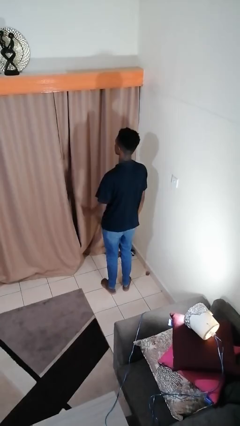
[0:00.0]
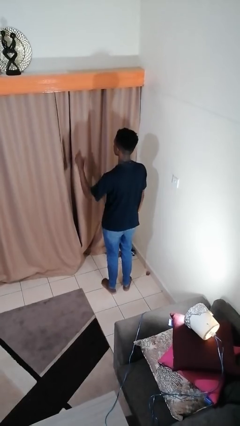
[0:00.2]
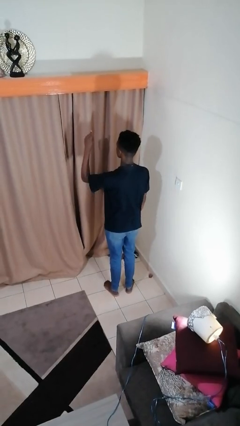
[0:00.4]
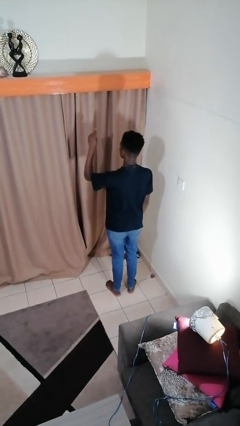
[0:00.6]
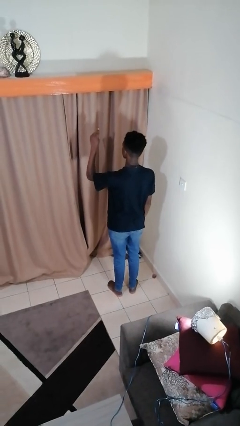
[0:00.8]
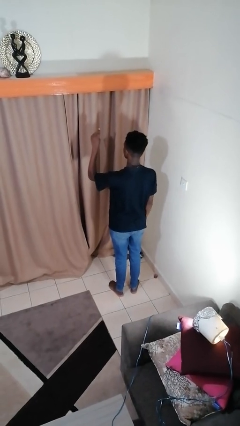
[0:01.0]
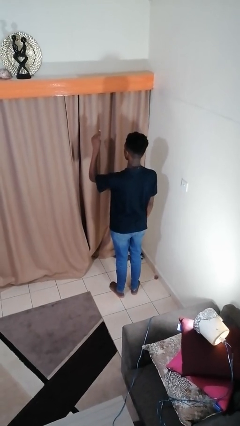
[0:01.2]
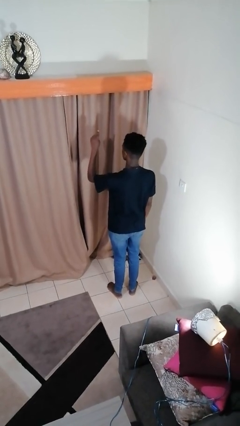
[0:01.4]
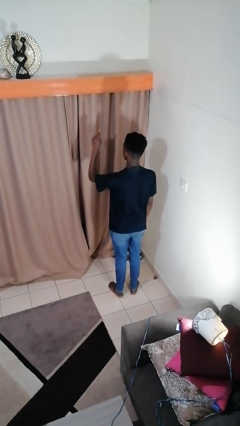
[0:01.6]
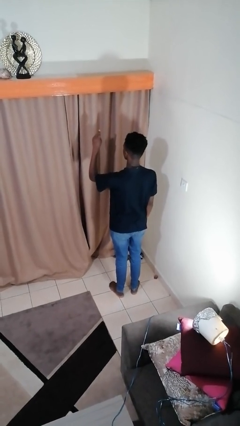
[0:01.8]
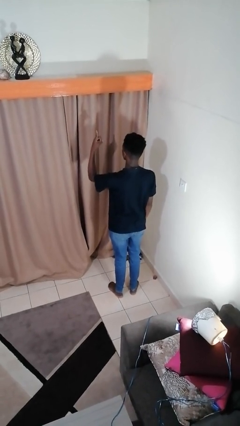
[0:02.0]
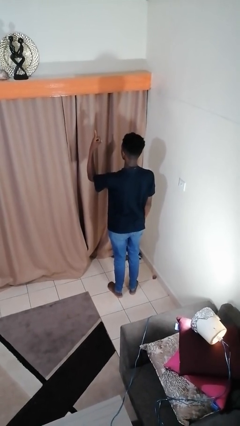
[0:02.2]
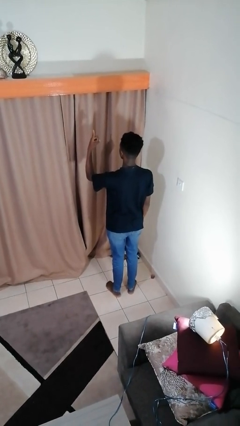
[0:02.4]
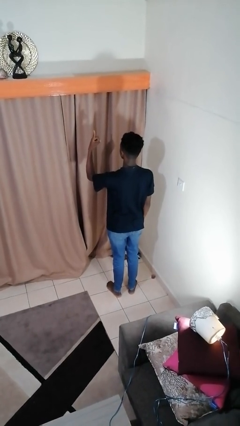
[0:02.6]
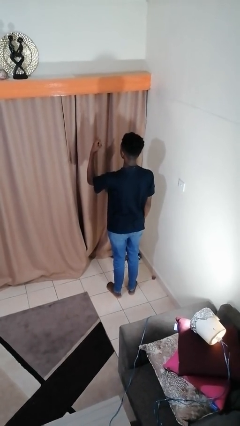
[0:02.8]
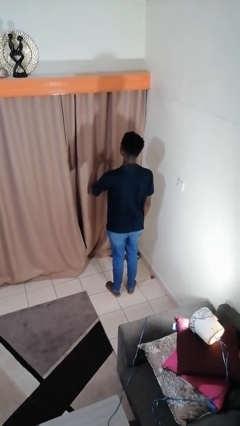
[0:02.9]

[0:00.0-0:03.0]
person gestures number one

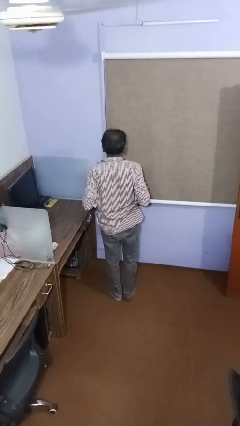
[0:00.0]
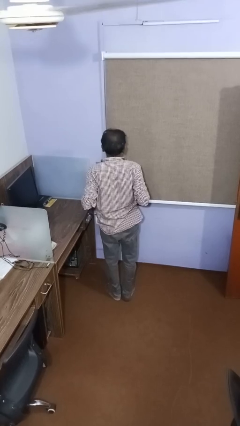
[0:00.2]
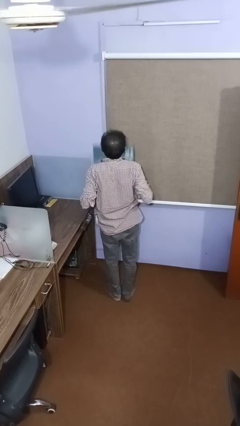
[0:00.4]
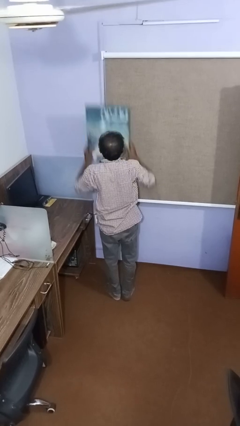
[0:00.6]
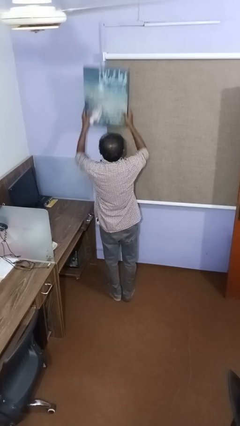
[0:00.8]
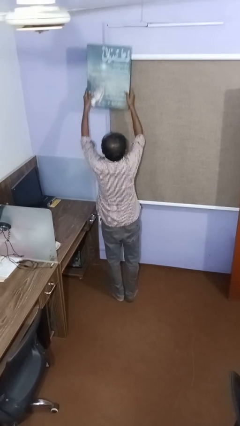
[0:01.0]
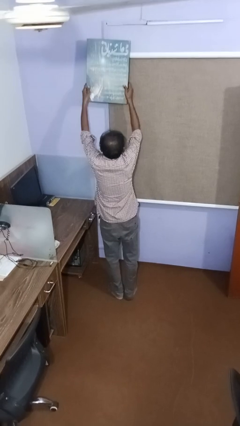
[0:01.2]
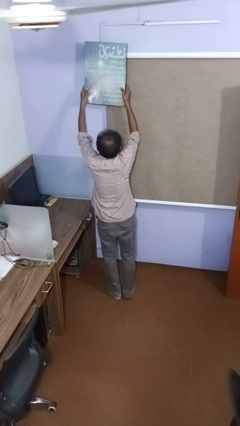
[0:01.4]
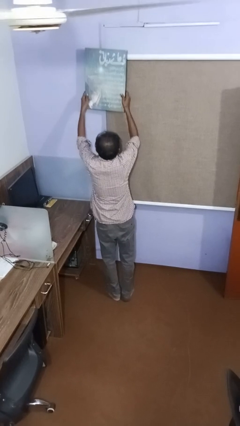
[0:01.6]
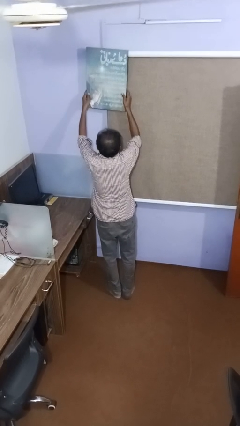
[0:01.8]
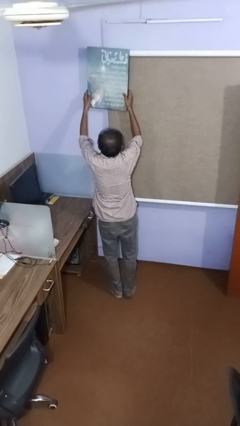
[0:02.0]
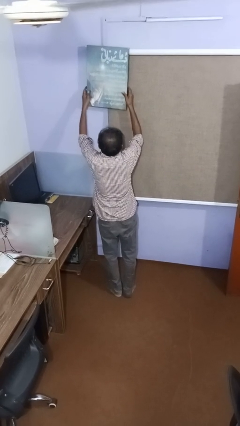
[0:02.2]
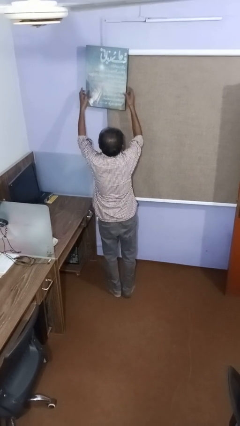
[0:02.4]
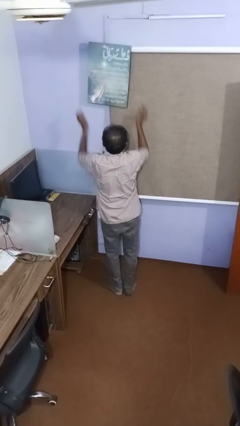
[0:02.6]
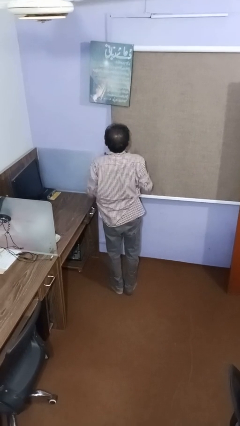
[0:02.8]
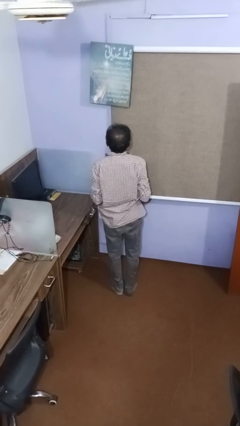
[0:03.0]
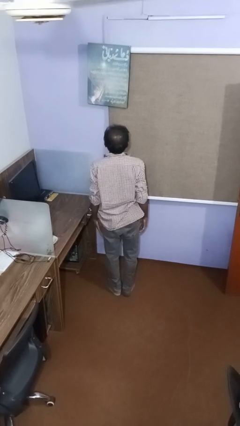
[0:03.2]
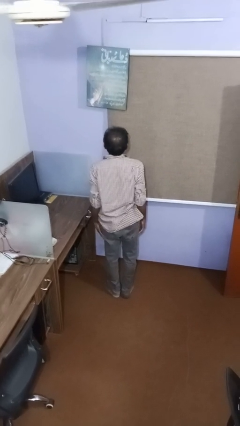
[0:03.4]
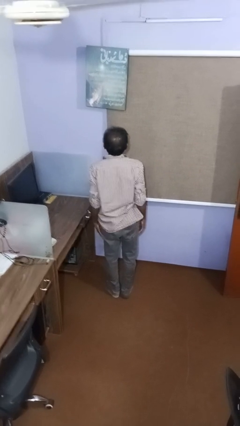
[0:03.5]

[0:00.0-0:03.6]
person puts up picture frame

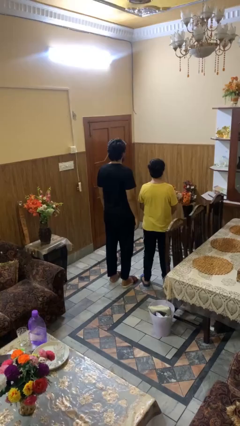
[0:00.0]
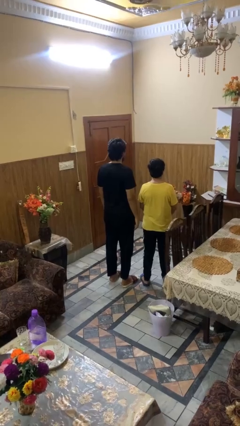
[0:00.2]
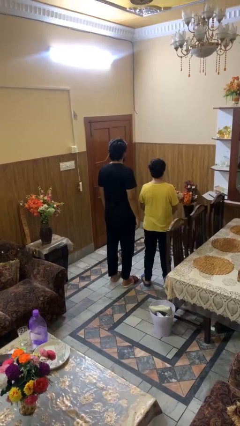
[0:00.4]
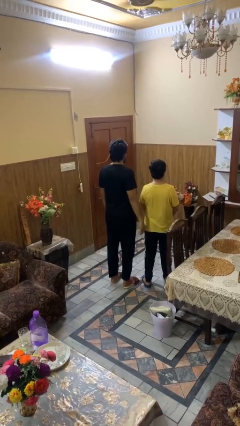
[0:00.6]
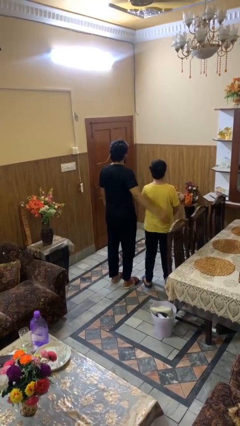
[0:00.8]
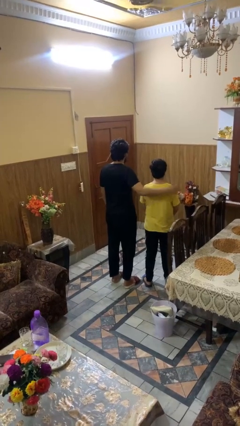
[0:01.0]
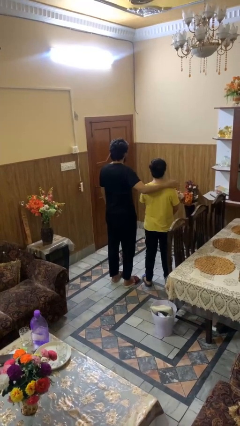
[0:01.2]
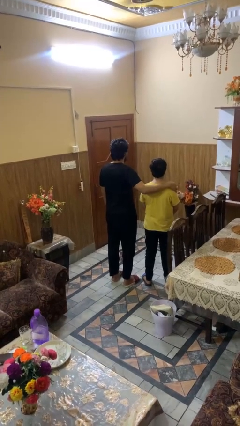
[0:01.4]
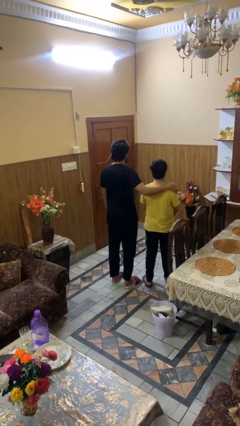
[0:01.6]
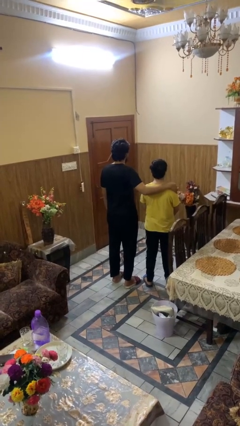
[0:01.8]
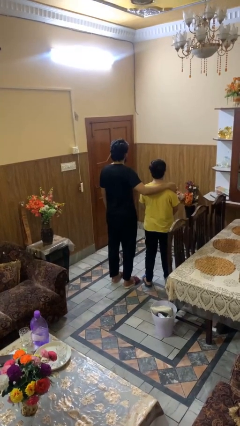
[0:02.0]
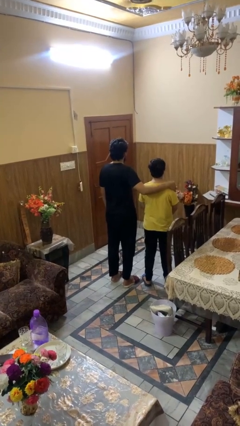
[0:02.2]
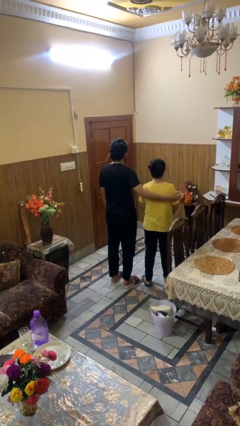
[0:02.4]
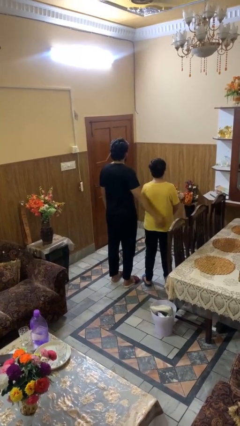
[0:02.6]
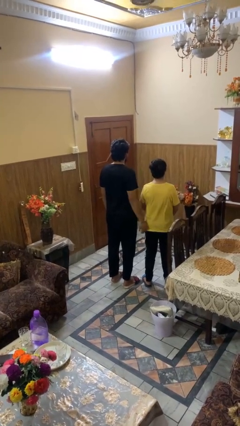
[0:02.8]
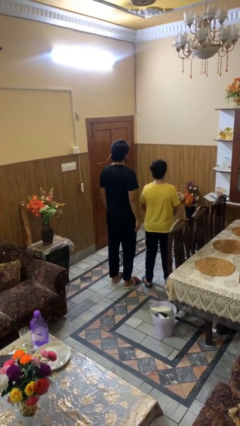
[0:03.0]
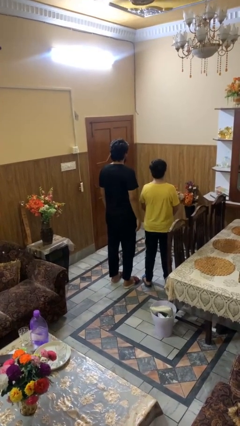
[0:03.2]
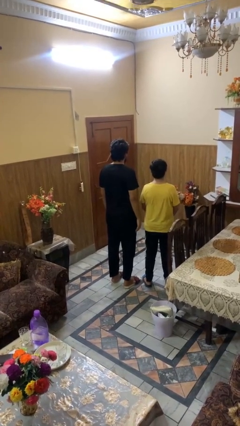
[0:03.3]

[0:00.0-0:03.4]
person pounds shoulders of person

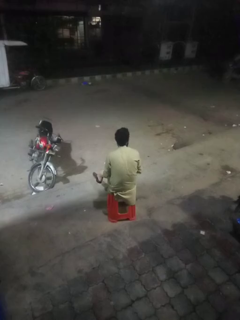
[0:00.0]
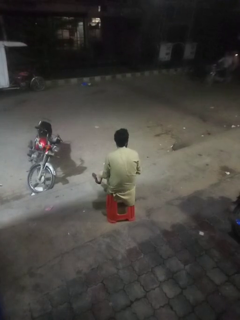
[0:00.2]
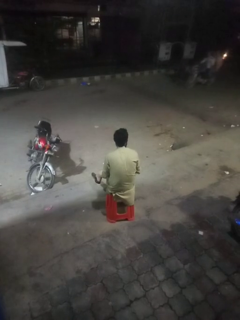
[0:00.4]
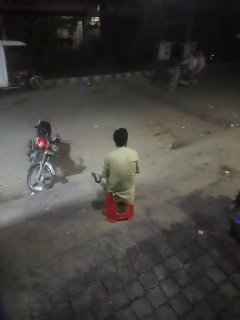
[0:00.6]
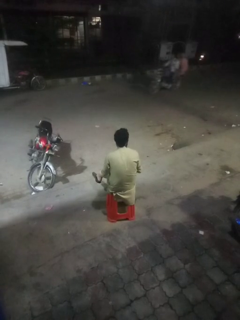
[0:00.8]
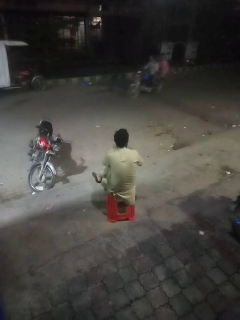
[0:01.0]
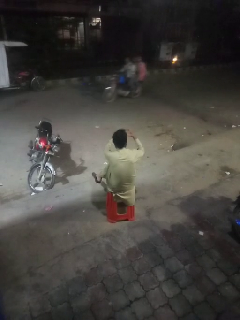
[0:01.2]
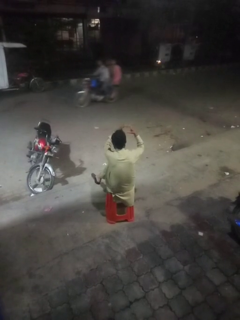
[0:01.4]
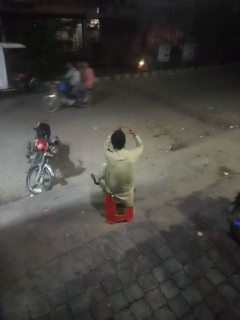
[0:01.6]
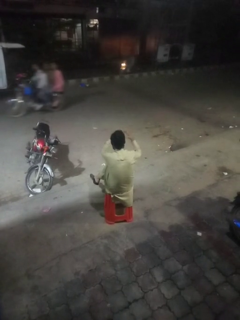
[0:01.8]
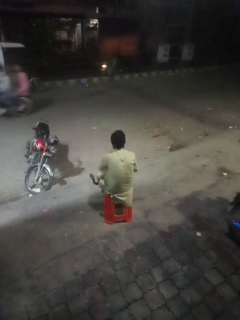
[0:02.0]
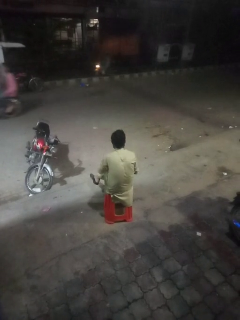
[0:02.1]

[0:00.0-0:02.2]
person gestures heart

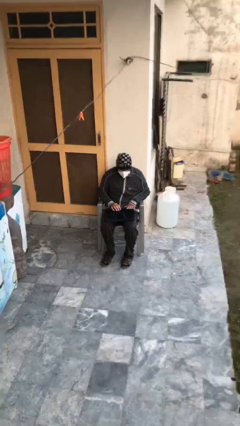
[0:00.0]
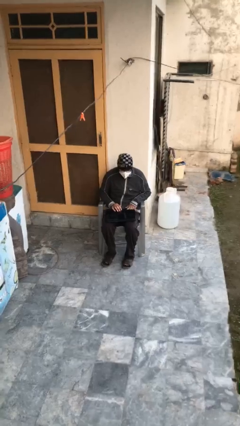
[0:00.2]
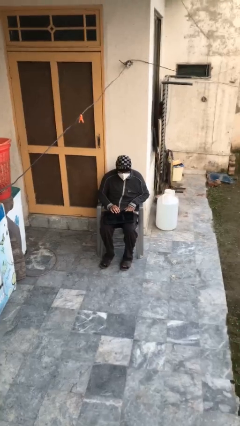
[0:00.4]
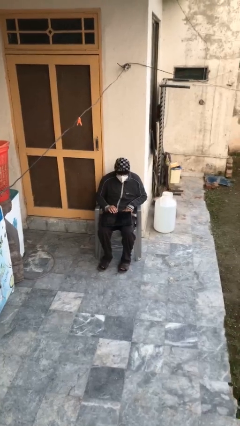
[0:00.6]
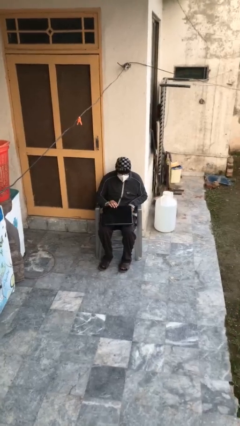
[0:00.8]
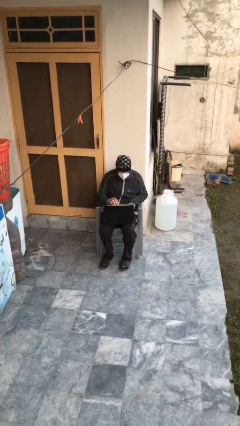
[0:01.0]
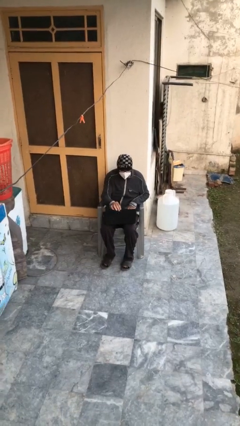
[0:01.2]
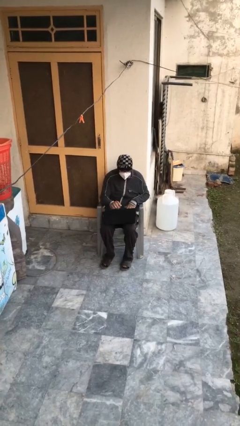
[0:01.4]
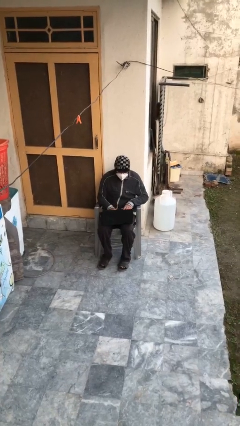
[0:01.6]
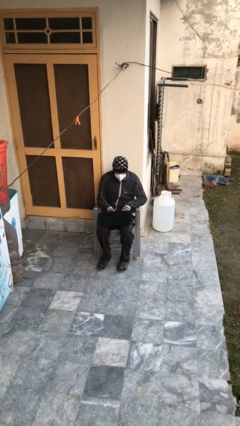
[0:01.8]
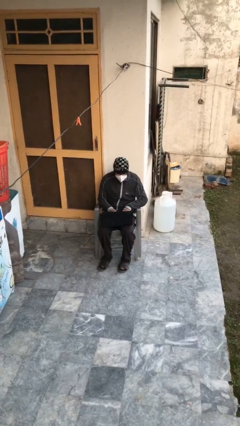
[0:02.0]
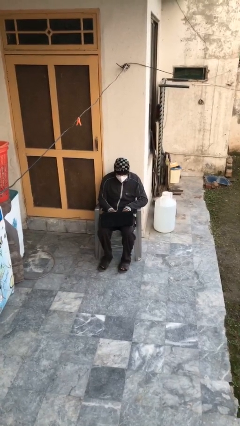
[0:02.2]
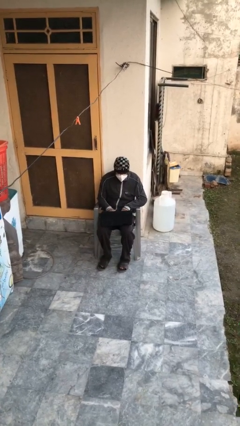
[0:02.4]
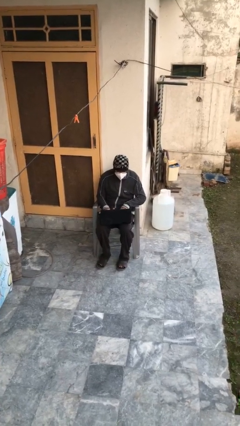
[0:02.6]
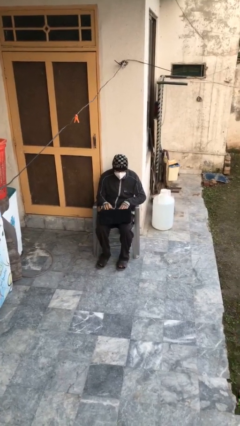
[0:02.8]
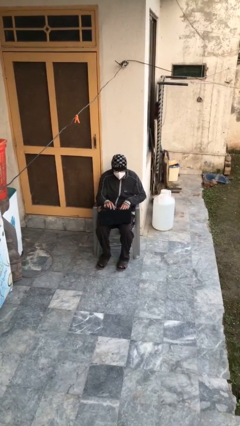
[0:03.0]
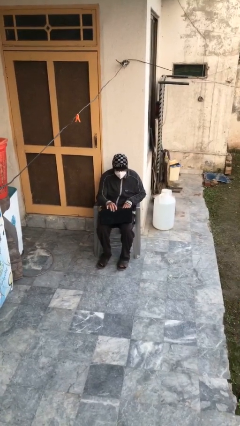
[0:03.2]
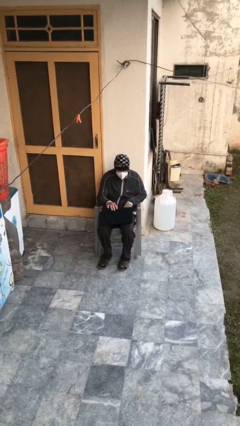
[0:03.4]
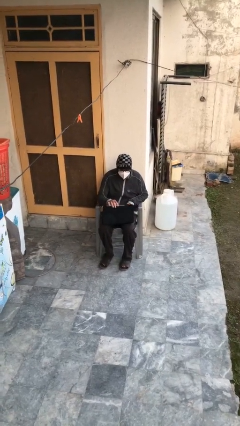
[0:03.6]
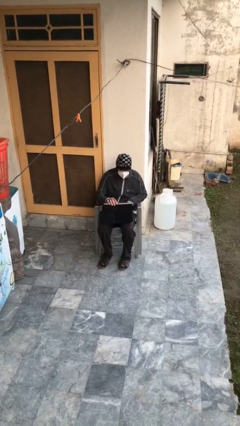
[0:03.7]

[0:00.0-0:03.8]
person interacts with laptop

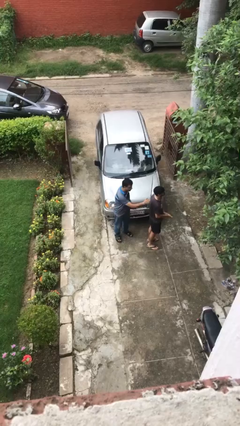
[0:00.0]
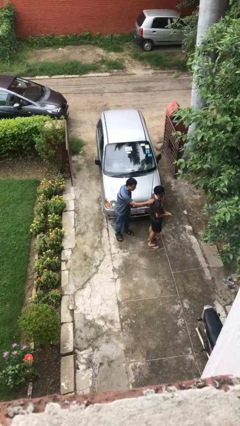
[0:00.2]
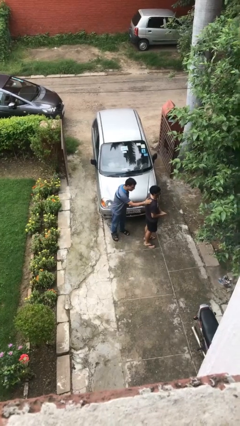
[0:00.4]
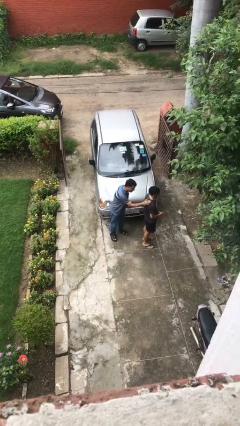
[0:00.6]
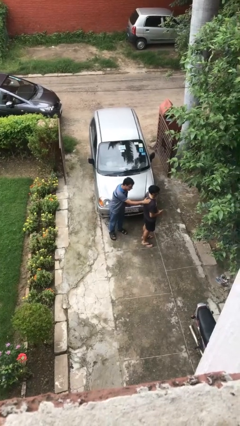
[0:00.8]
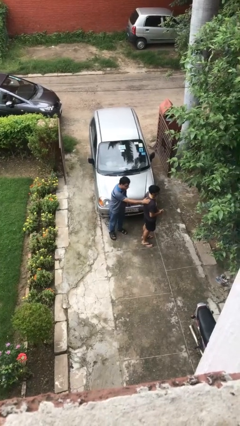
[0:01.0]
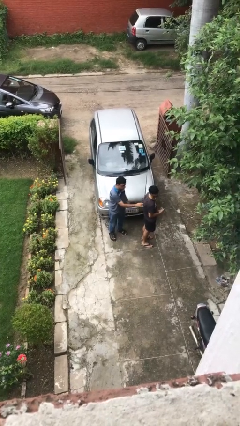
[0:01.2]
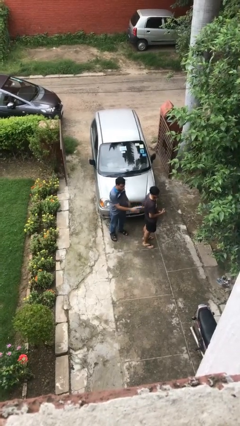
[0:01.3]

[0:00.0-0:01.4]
person touches back of person

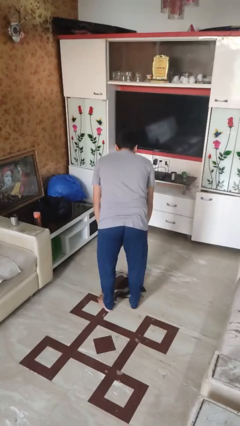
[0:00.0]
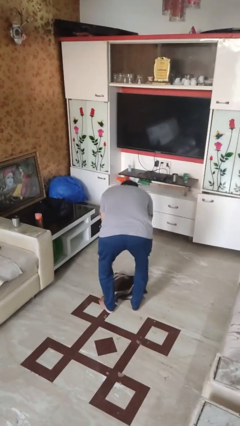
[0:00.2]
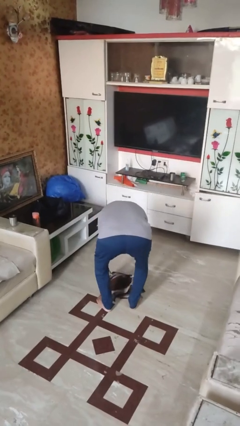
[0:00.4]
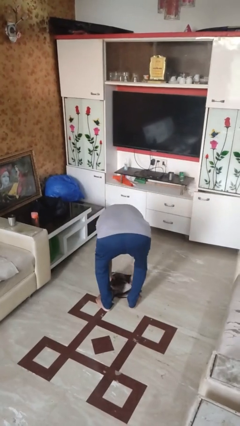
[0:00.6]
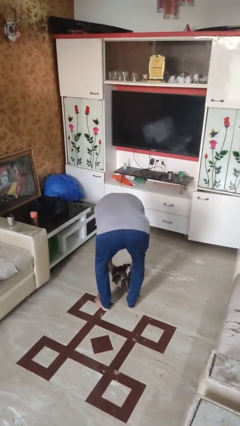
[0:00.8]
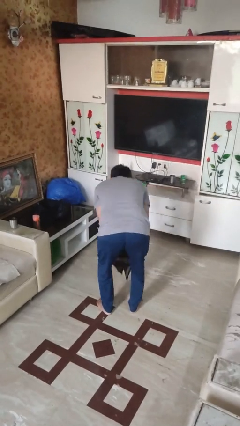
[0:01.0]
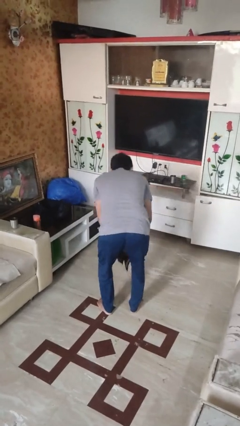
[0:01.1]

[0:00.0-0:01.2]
person picks up object from floor
